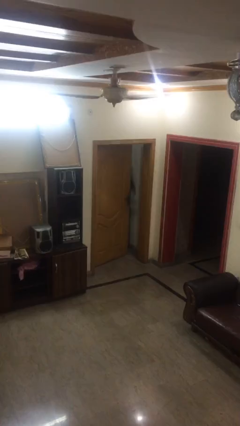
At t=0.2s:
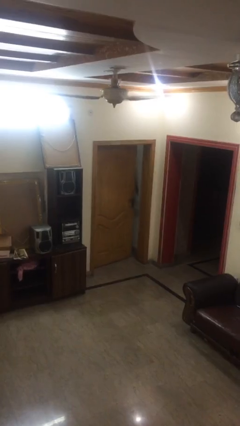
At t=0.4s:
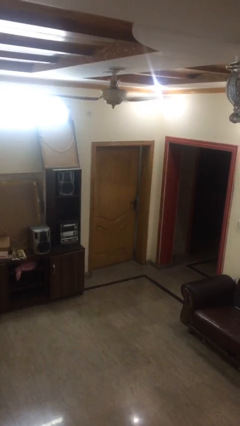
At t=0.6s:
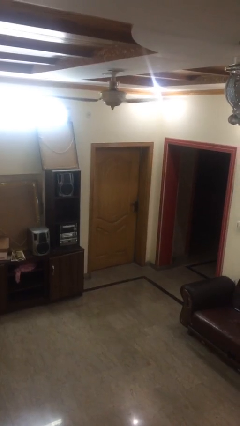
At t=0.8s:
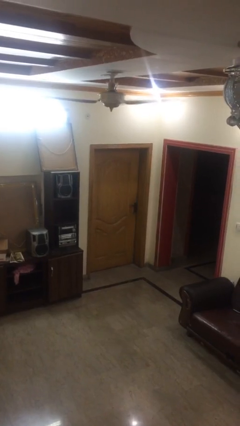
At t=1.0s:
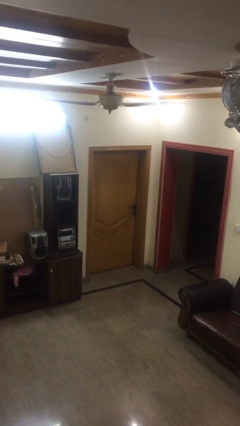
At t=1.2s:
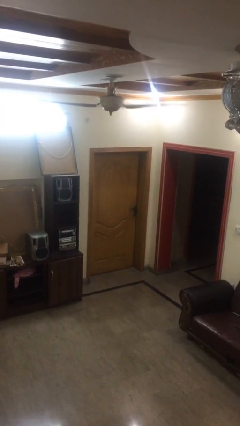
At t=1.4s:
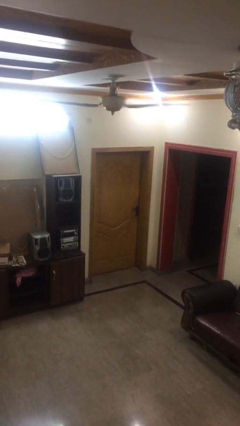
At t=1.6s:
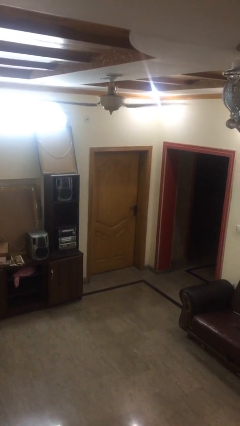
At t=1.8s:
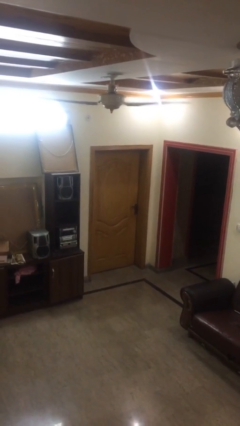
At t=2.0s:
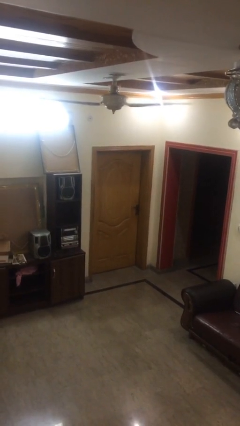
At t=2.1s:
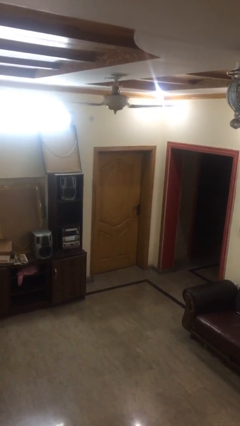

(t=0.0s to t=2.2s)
person closes facility door

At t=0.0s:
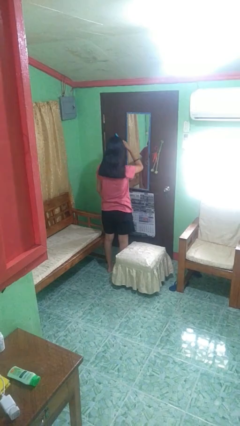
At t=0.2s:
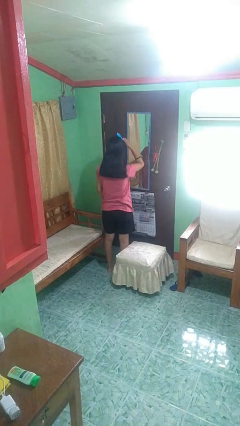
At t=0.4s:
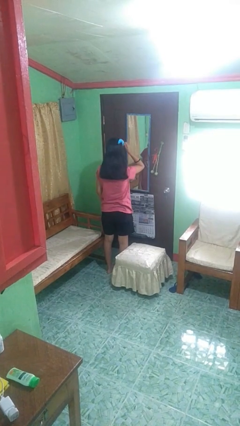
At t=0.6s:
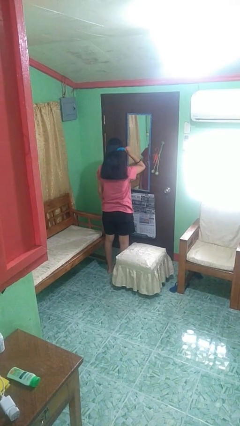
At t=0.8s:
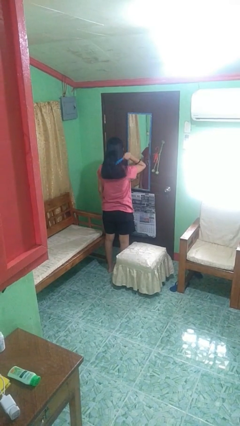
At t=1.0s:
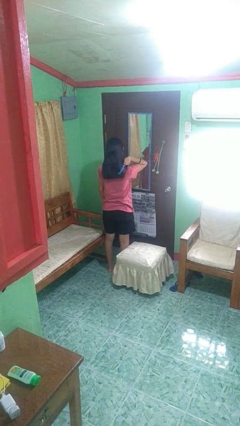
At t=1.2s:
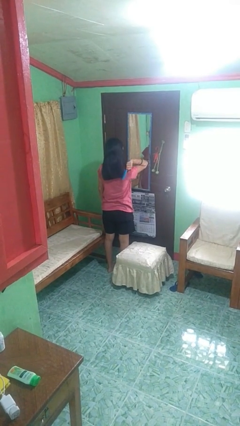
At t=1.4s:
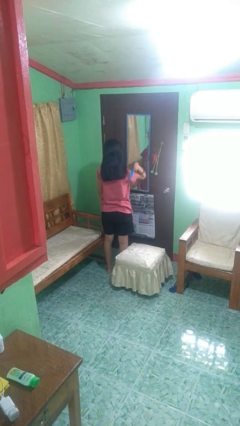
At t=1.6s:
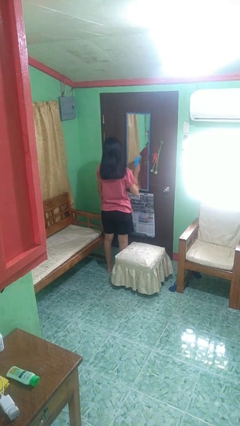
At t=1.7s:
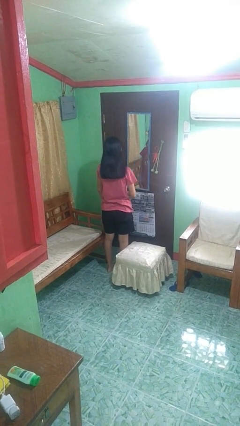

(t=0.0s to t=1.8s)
person brushes hair

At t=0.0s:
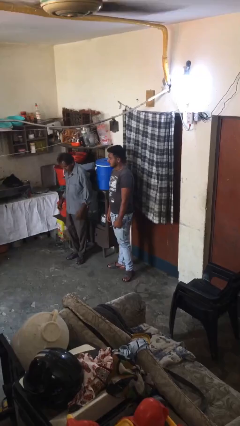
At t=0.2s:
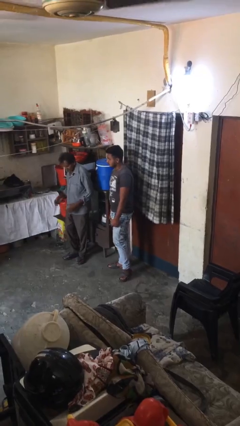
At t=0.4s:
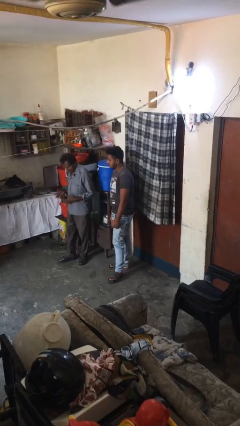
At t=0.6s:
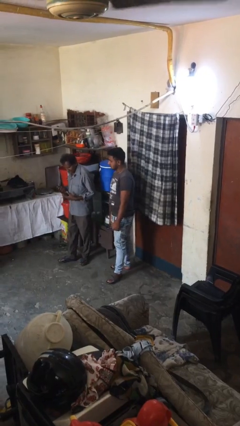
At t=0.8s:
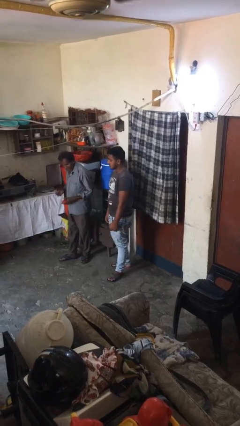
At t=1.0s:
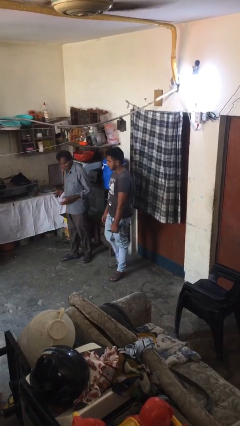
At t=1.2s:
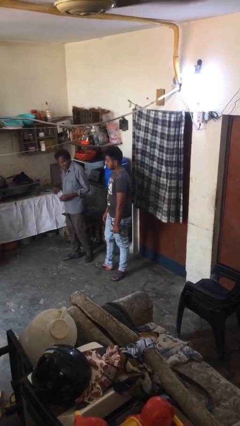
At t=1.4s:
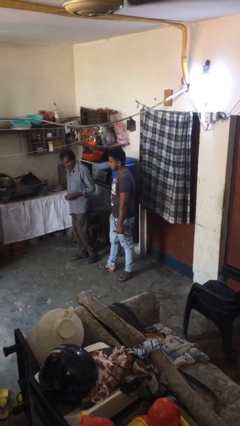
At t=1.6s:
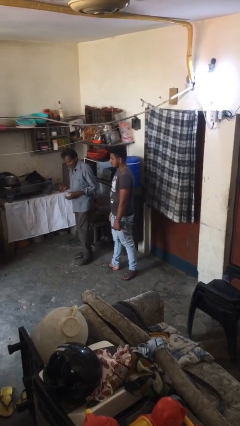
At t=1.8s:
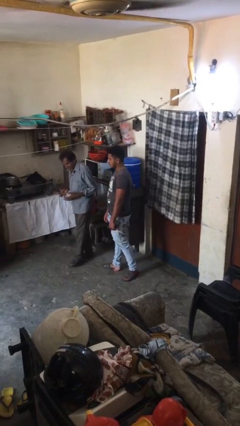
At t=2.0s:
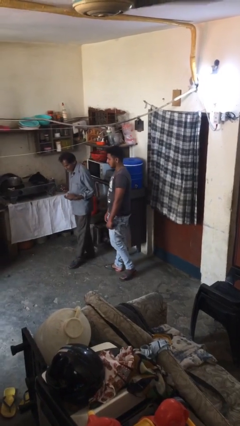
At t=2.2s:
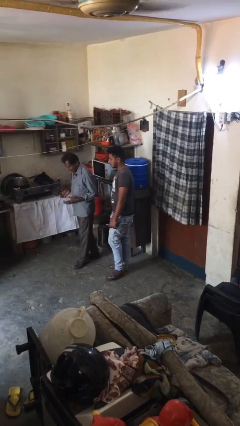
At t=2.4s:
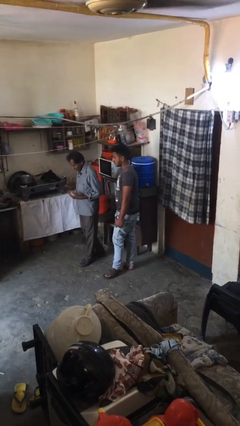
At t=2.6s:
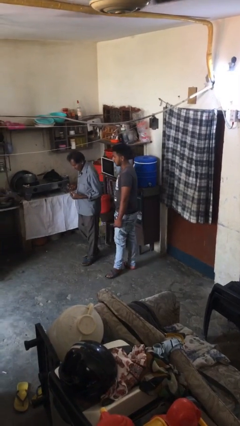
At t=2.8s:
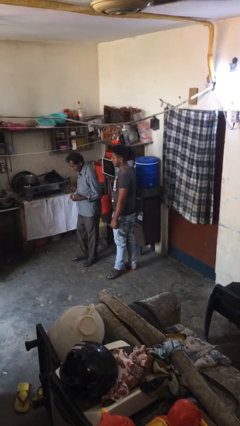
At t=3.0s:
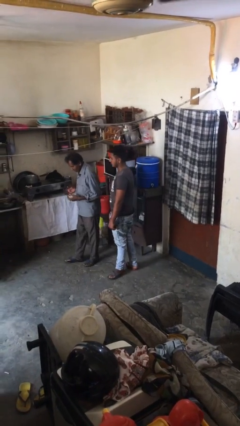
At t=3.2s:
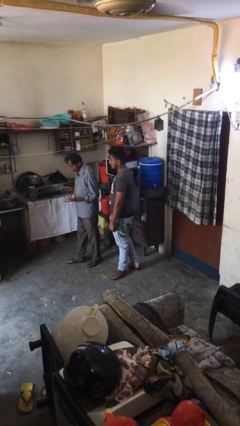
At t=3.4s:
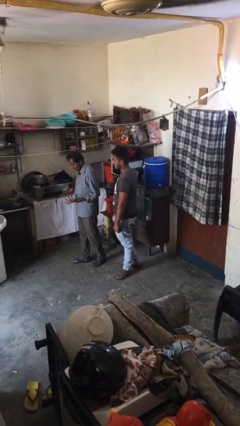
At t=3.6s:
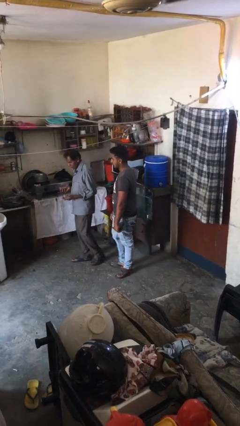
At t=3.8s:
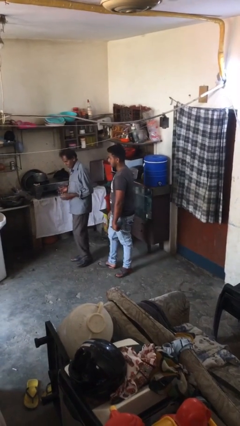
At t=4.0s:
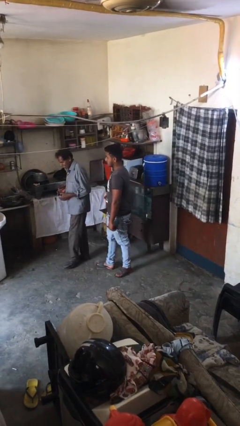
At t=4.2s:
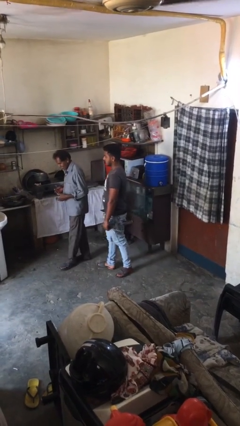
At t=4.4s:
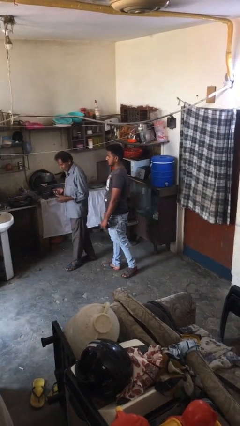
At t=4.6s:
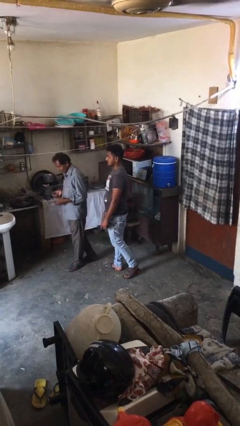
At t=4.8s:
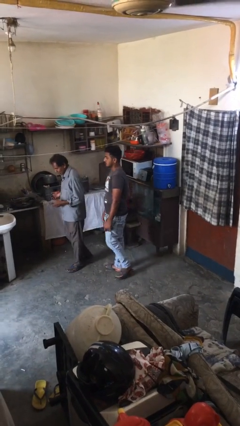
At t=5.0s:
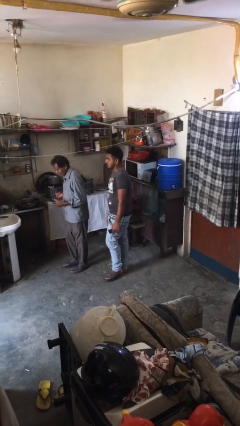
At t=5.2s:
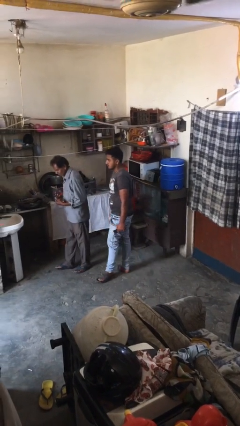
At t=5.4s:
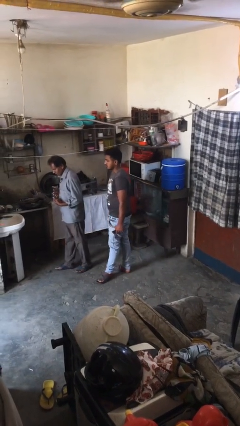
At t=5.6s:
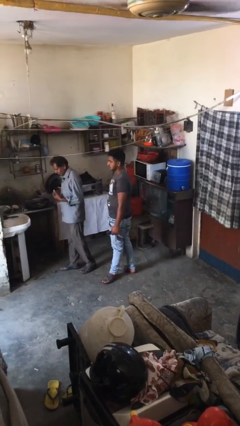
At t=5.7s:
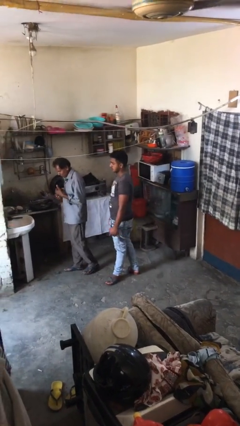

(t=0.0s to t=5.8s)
person talks to person

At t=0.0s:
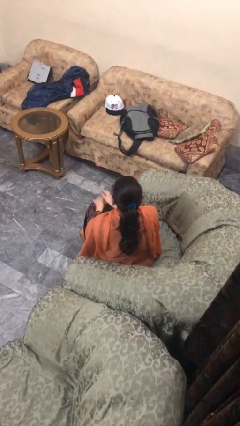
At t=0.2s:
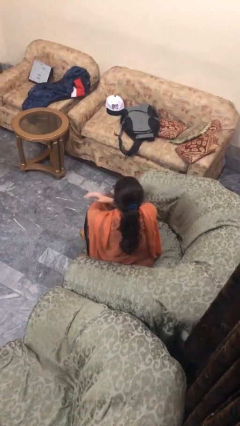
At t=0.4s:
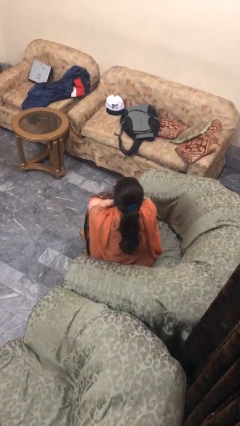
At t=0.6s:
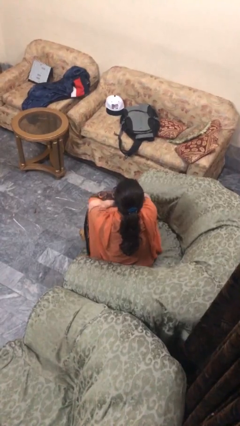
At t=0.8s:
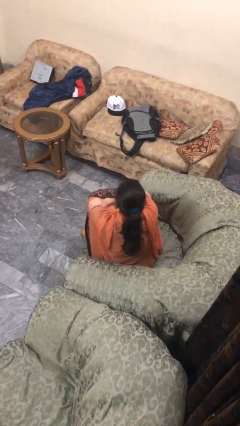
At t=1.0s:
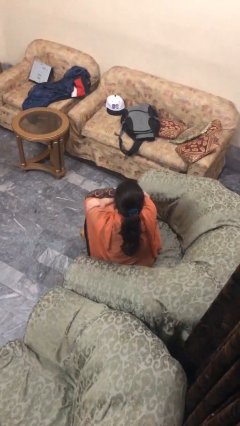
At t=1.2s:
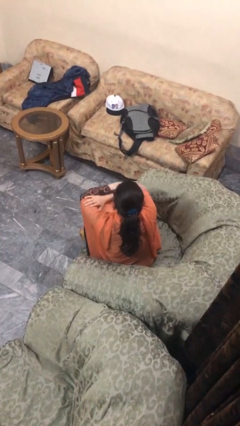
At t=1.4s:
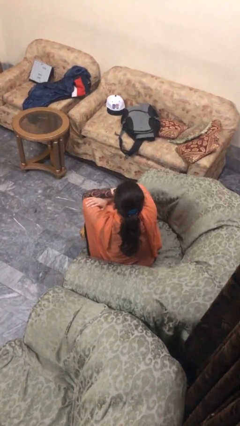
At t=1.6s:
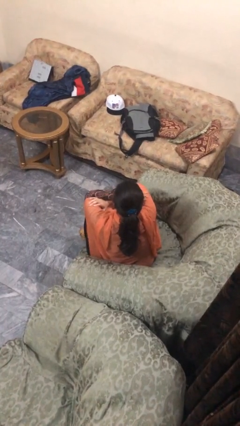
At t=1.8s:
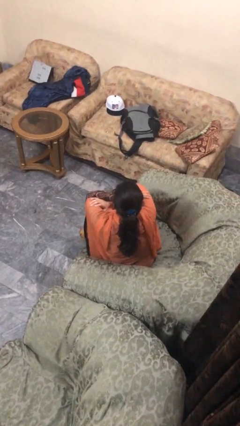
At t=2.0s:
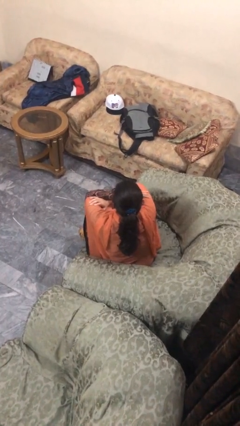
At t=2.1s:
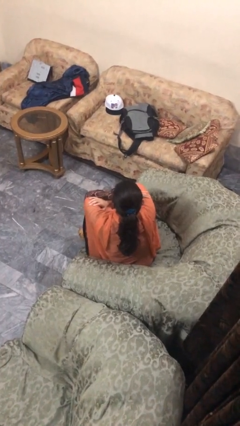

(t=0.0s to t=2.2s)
person crosses arms

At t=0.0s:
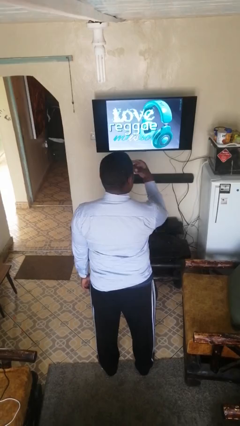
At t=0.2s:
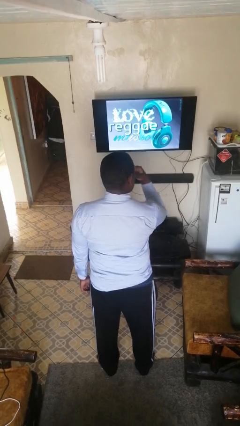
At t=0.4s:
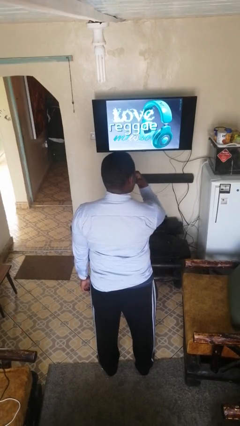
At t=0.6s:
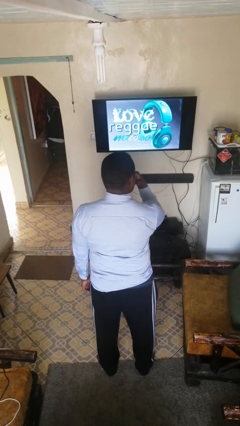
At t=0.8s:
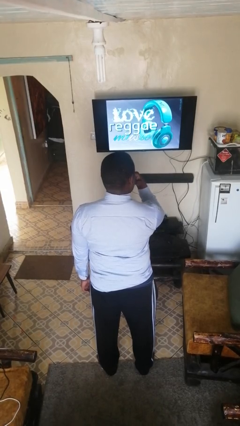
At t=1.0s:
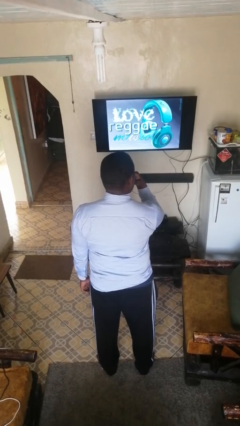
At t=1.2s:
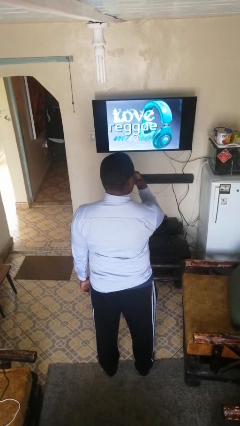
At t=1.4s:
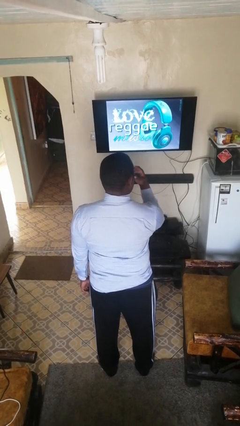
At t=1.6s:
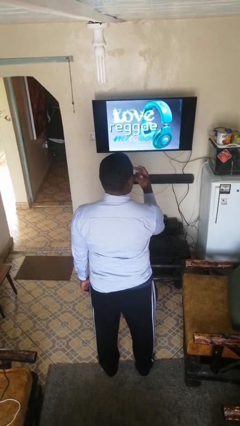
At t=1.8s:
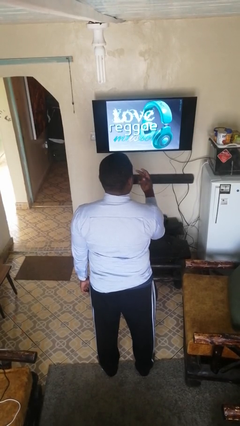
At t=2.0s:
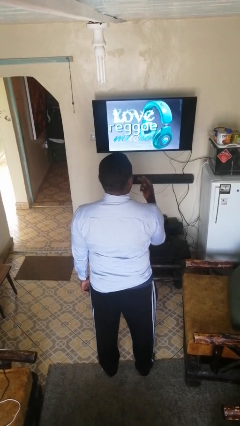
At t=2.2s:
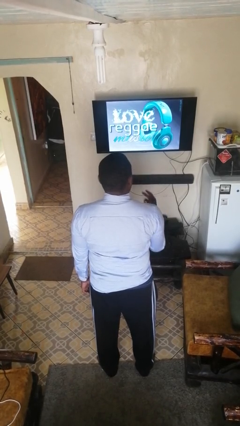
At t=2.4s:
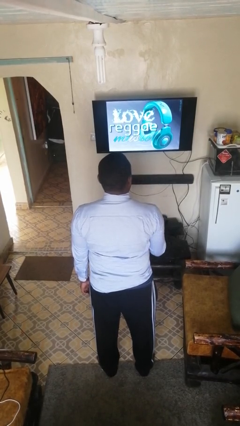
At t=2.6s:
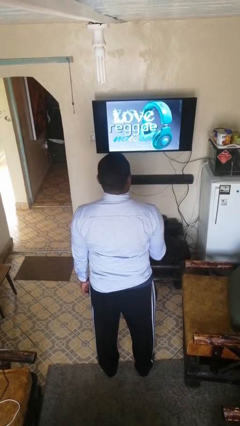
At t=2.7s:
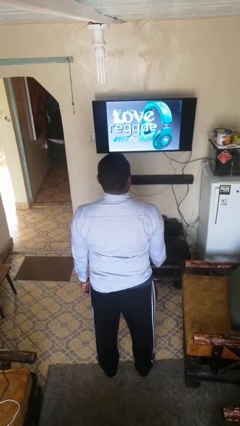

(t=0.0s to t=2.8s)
person gestures watch closely

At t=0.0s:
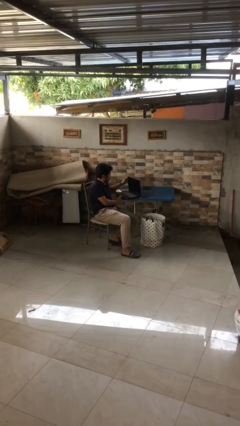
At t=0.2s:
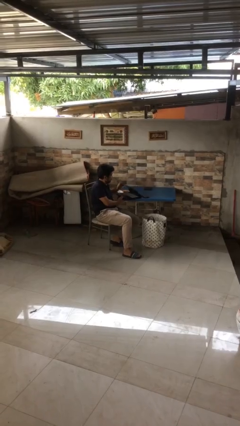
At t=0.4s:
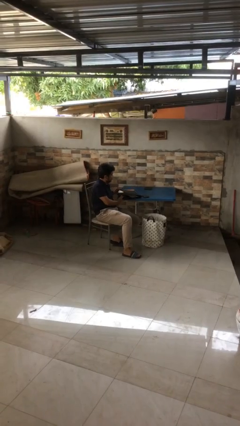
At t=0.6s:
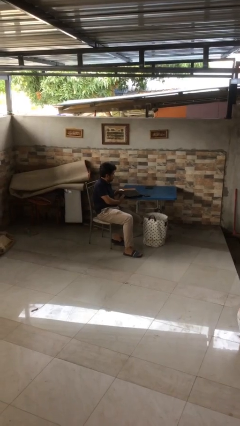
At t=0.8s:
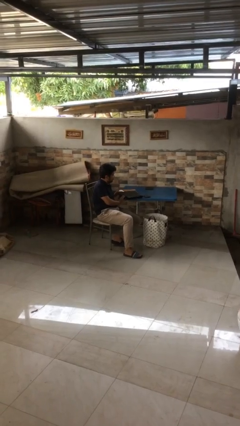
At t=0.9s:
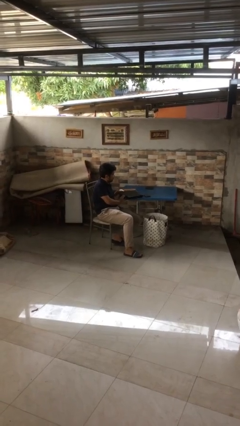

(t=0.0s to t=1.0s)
person closes laptop

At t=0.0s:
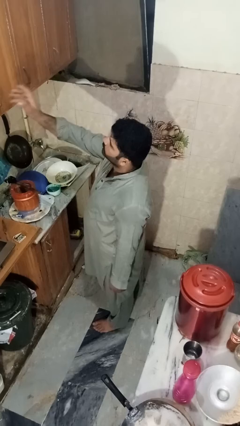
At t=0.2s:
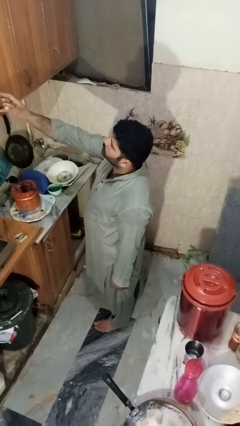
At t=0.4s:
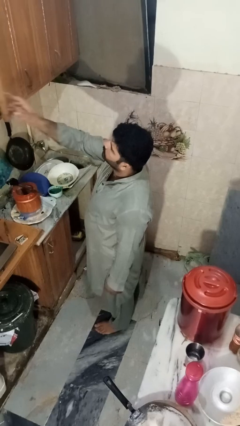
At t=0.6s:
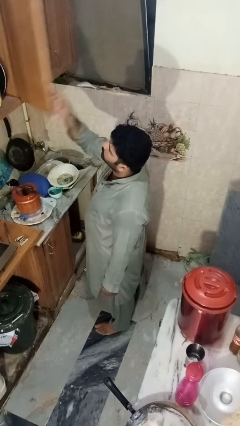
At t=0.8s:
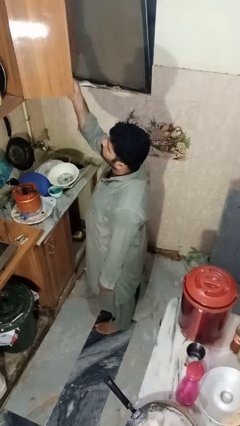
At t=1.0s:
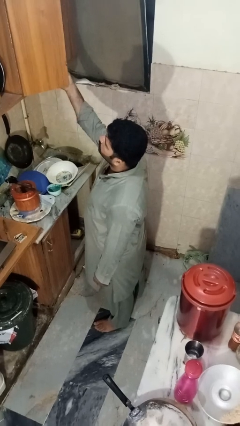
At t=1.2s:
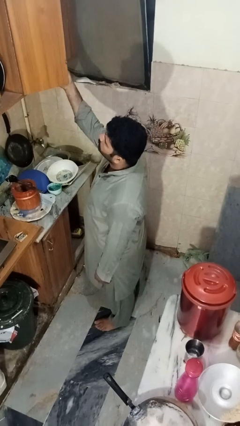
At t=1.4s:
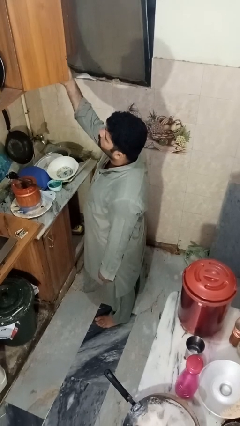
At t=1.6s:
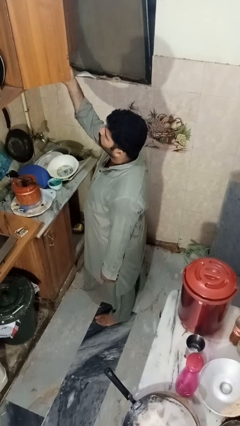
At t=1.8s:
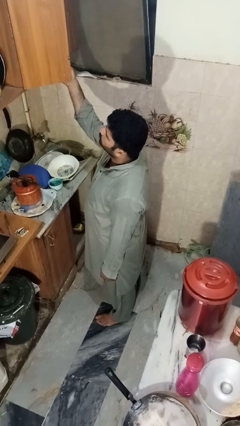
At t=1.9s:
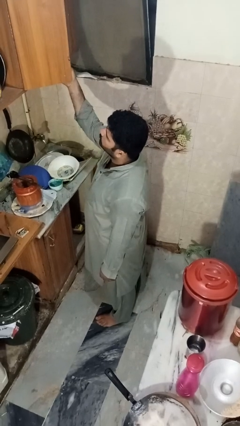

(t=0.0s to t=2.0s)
person opens cabinet
